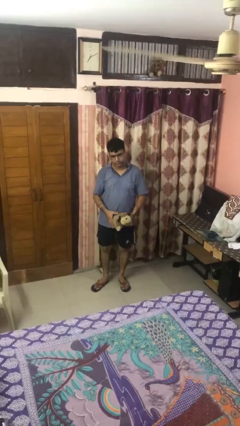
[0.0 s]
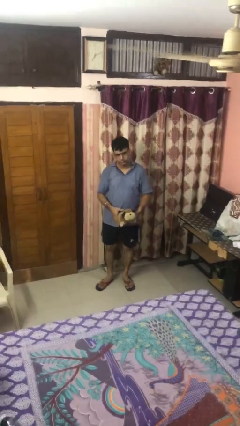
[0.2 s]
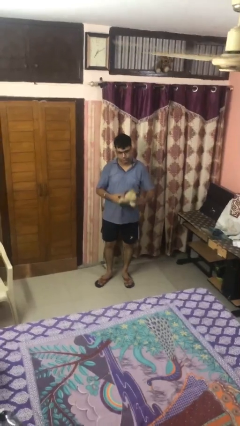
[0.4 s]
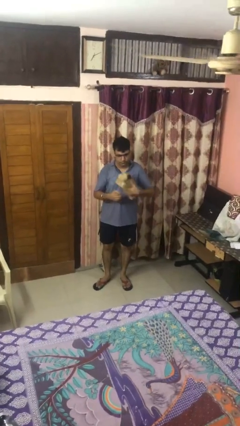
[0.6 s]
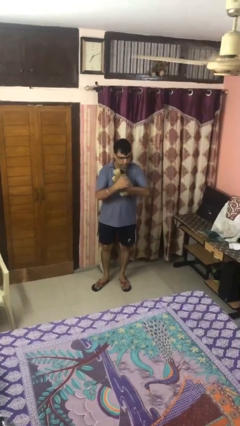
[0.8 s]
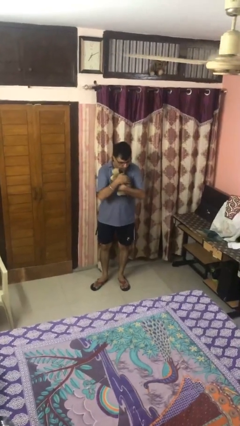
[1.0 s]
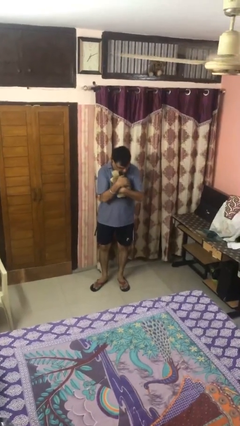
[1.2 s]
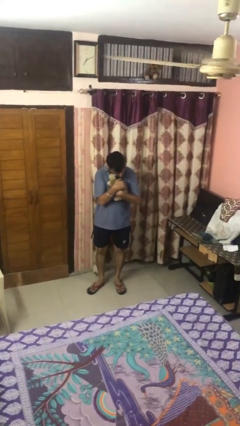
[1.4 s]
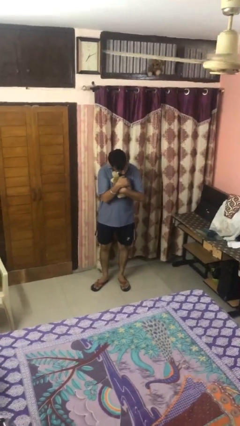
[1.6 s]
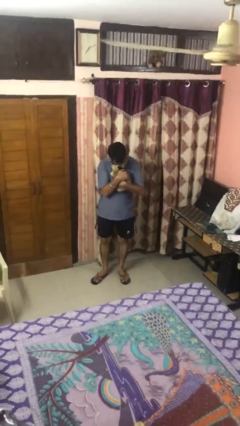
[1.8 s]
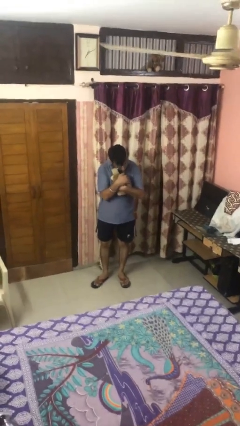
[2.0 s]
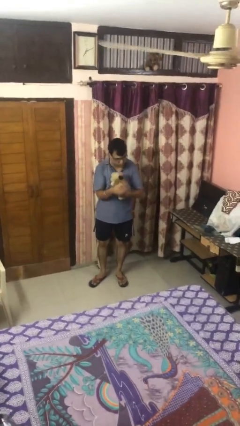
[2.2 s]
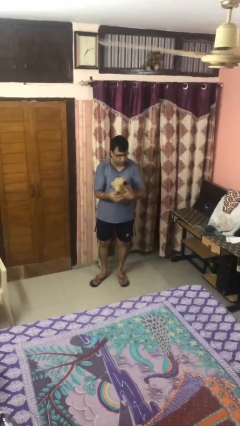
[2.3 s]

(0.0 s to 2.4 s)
person hugs stuffed animal

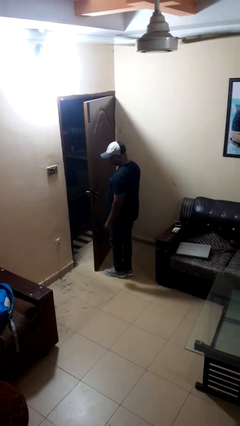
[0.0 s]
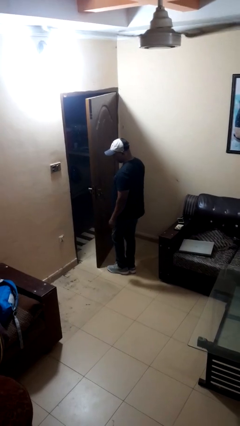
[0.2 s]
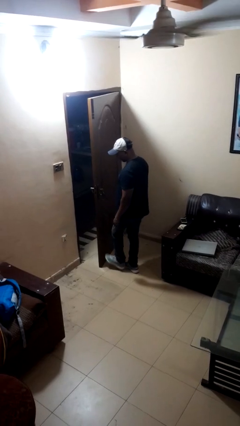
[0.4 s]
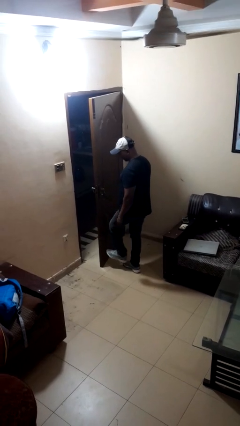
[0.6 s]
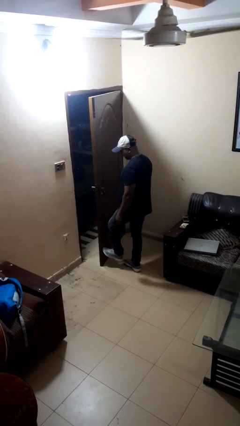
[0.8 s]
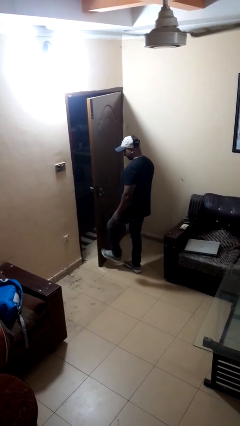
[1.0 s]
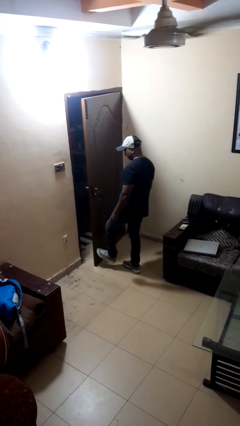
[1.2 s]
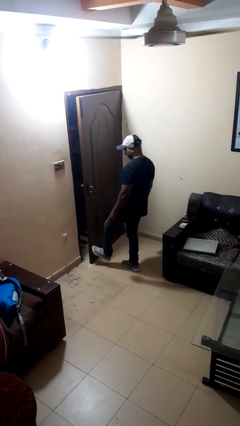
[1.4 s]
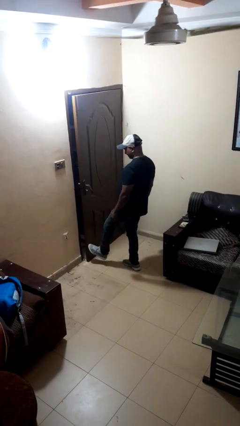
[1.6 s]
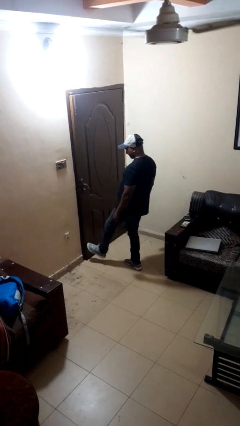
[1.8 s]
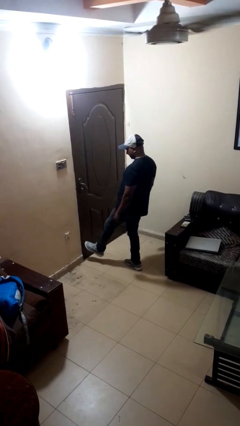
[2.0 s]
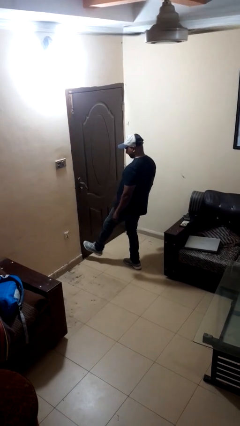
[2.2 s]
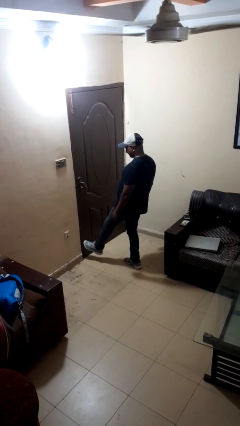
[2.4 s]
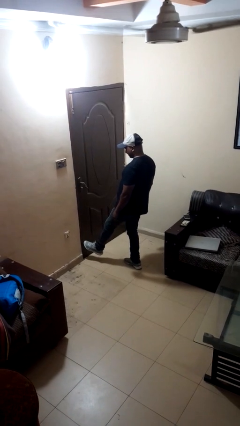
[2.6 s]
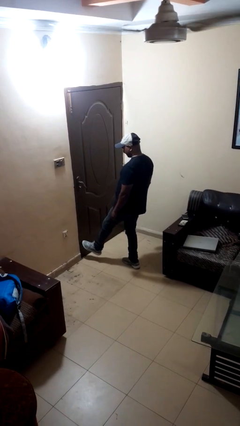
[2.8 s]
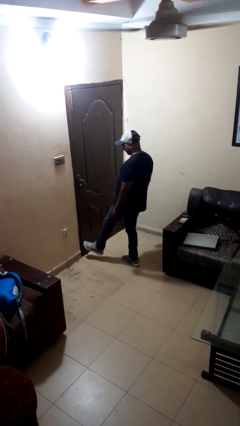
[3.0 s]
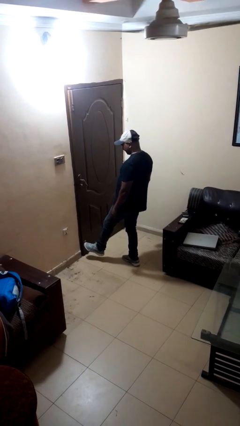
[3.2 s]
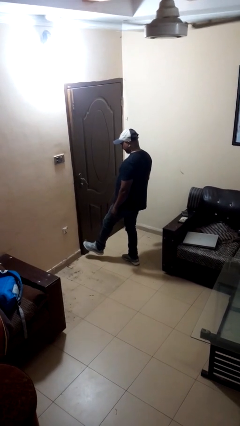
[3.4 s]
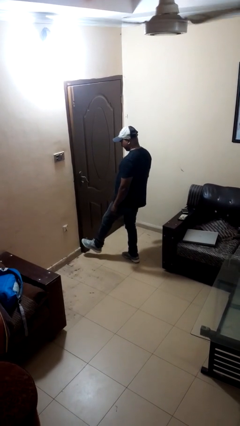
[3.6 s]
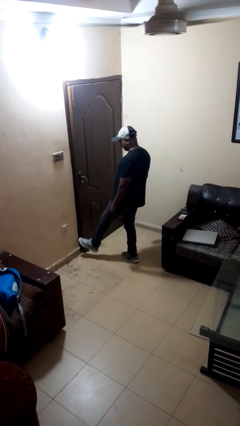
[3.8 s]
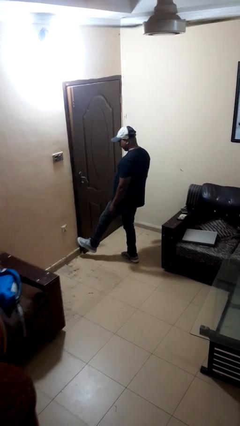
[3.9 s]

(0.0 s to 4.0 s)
person closes door with foot

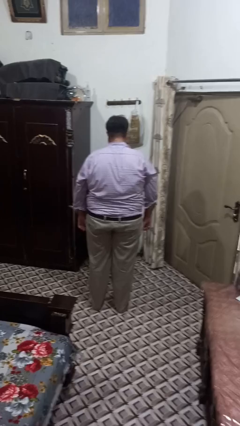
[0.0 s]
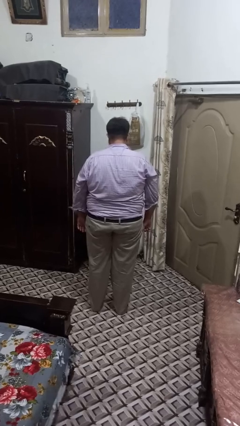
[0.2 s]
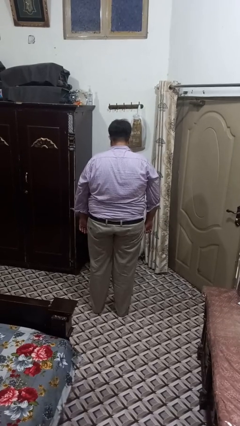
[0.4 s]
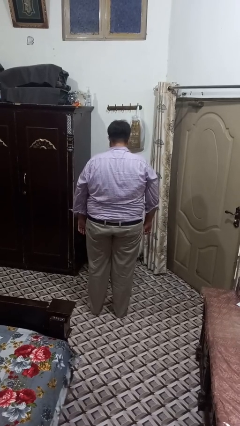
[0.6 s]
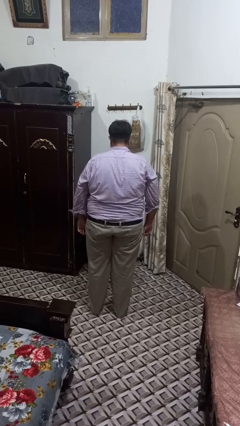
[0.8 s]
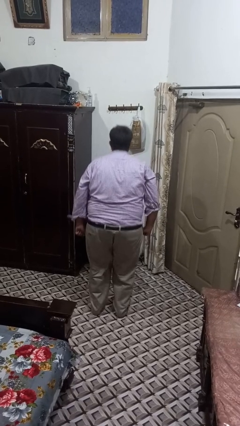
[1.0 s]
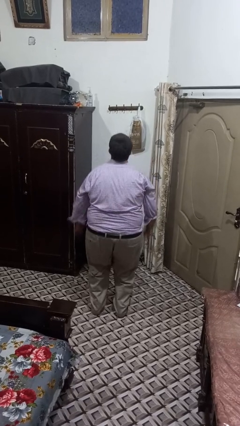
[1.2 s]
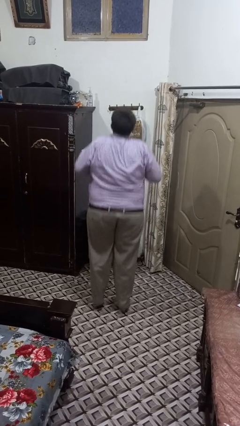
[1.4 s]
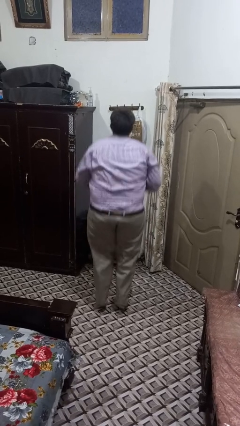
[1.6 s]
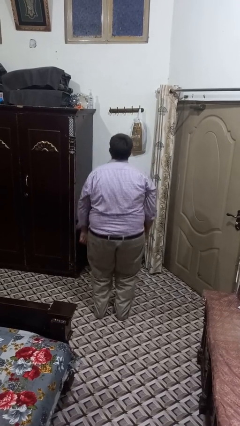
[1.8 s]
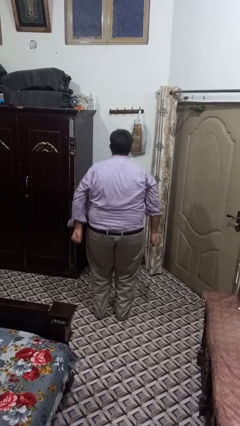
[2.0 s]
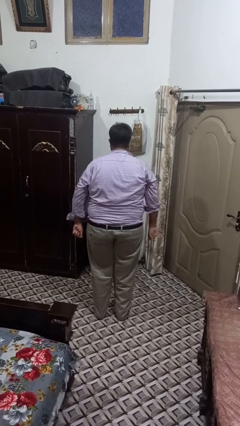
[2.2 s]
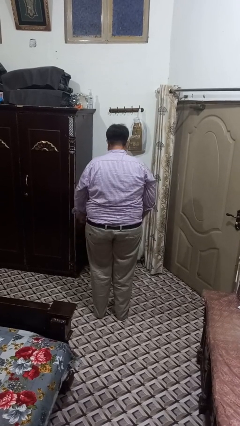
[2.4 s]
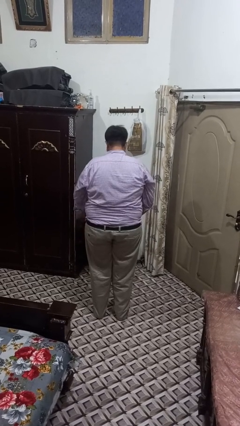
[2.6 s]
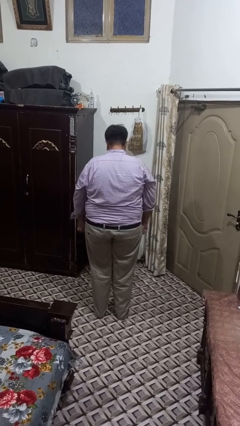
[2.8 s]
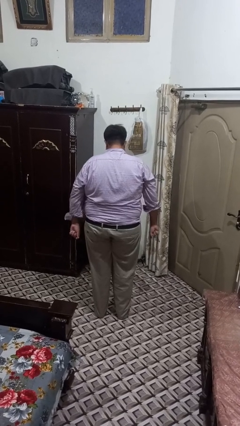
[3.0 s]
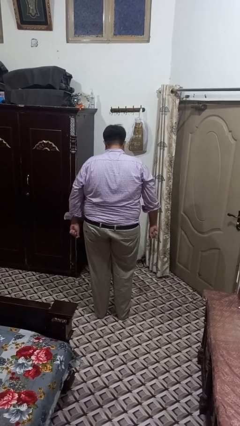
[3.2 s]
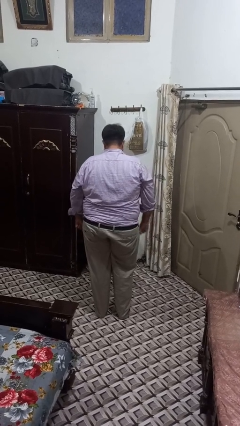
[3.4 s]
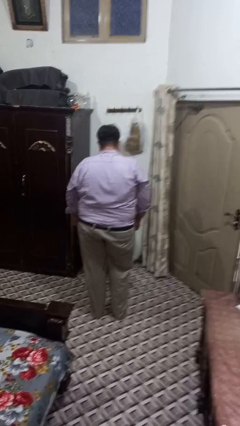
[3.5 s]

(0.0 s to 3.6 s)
person jumps

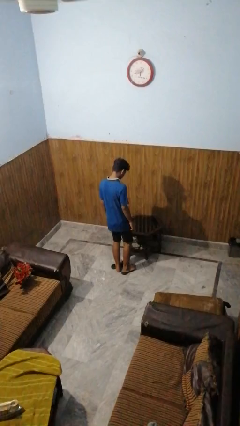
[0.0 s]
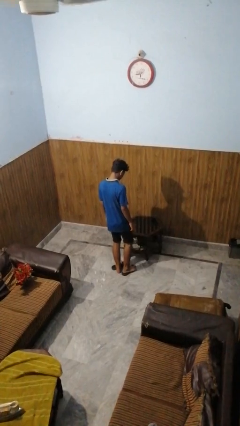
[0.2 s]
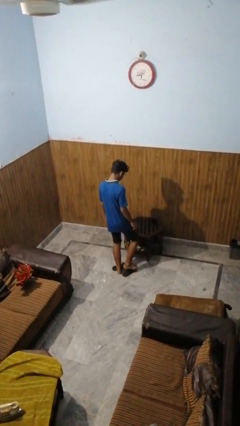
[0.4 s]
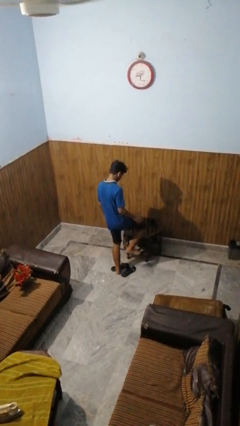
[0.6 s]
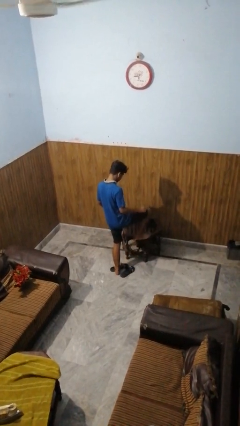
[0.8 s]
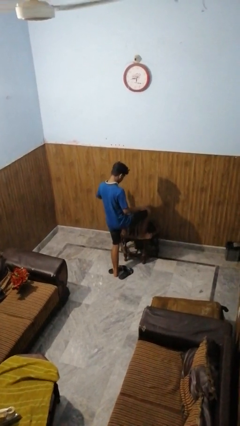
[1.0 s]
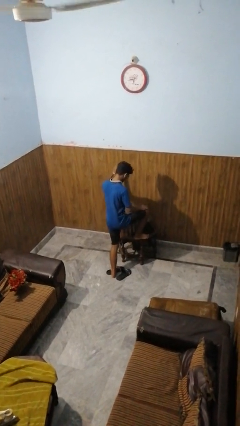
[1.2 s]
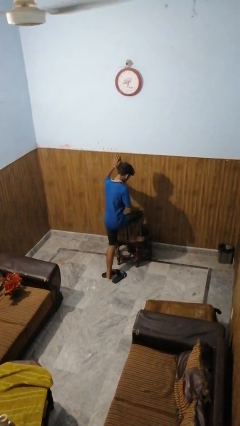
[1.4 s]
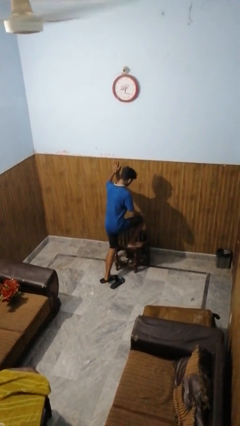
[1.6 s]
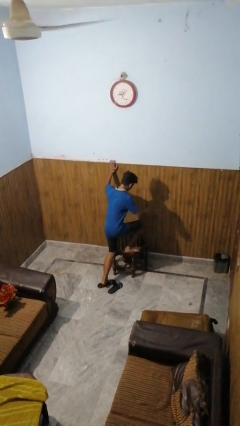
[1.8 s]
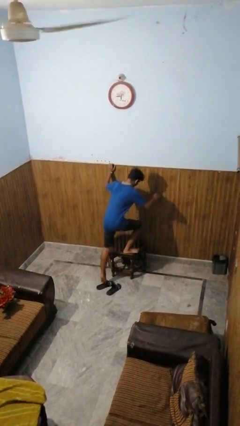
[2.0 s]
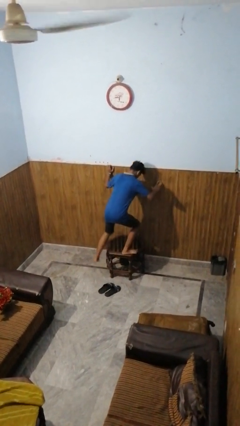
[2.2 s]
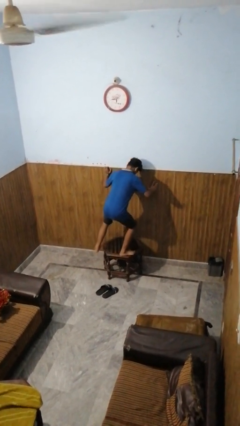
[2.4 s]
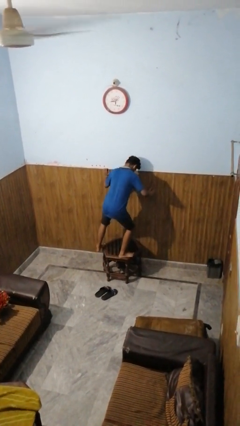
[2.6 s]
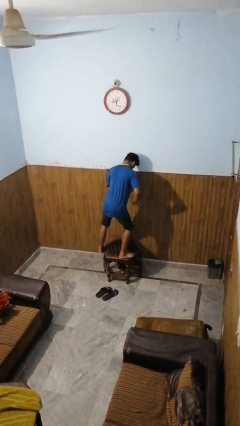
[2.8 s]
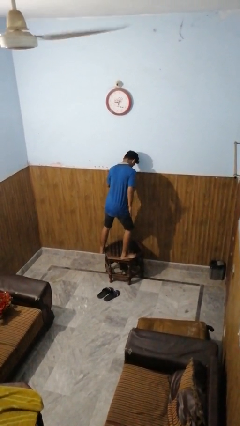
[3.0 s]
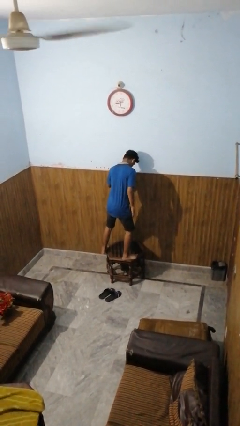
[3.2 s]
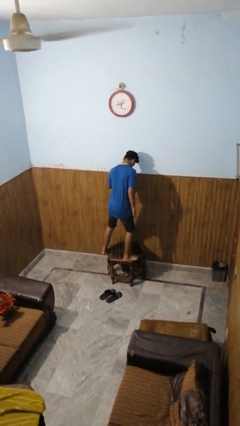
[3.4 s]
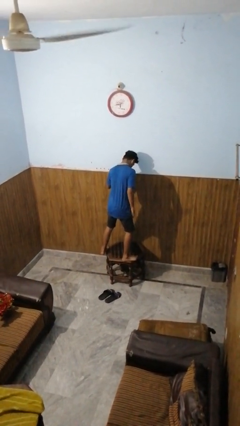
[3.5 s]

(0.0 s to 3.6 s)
person climbs on table

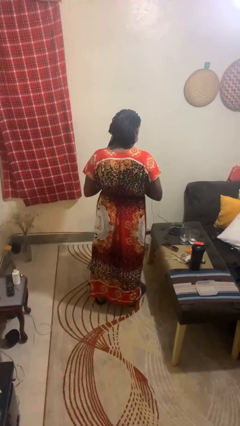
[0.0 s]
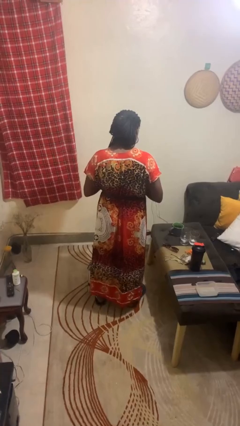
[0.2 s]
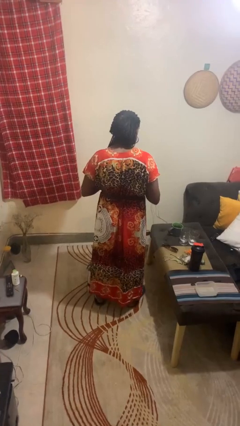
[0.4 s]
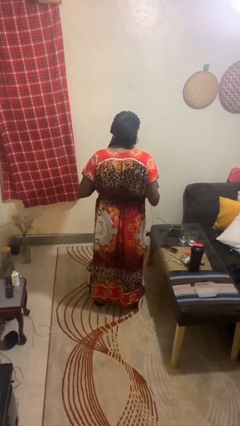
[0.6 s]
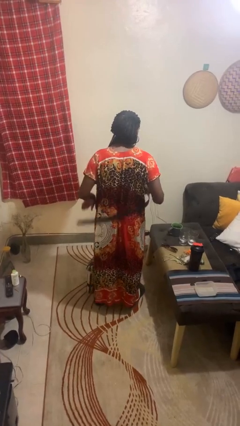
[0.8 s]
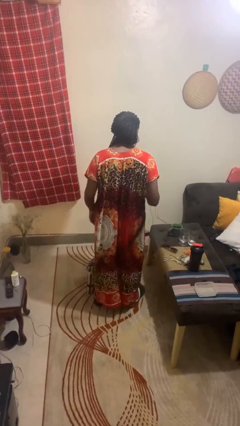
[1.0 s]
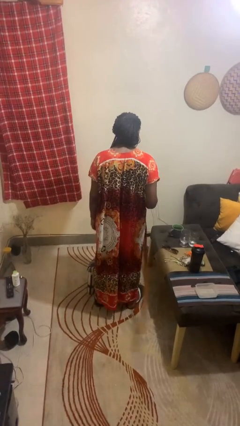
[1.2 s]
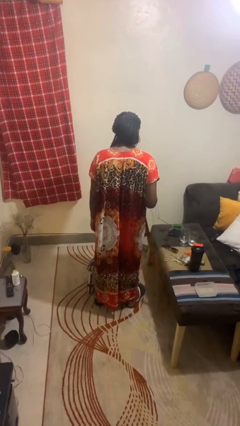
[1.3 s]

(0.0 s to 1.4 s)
person takes off belt

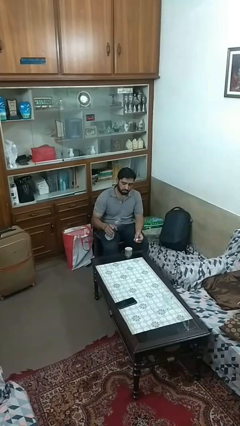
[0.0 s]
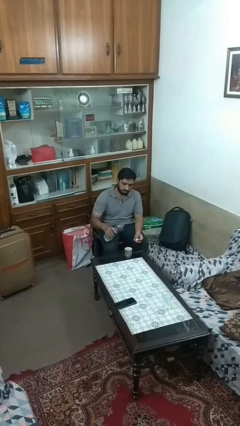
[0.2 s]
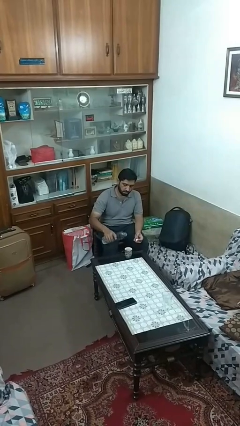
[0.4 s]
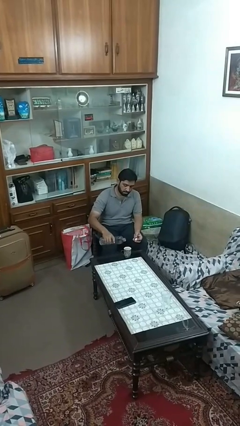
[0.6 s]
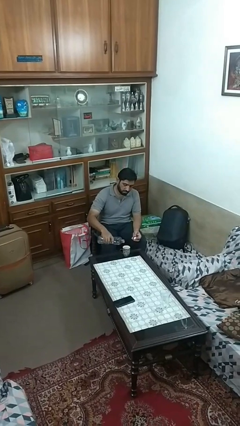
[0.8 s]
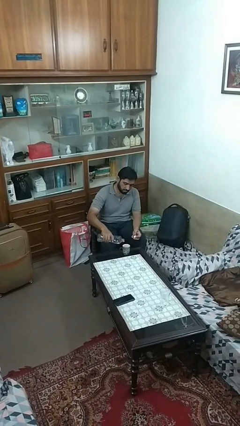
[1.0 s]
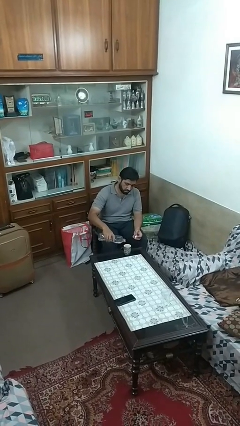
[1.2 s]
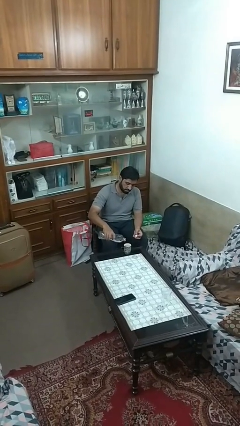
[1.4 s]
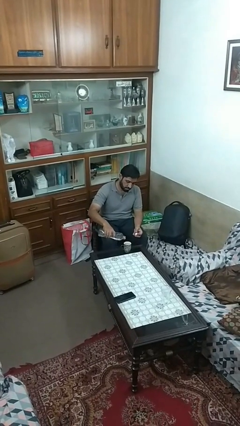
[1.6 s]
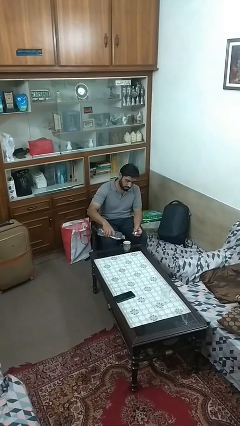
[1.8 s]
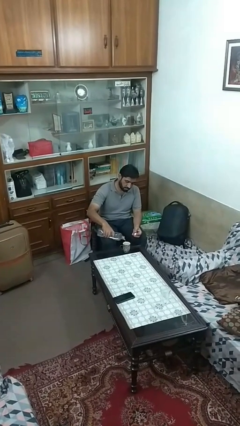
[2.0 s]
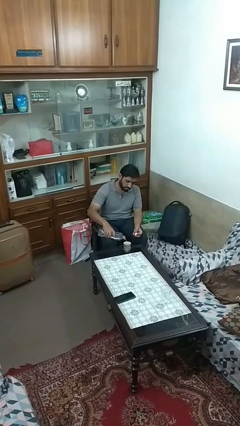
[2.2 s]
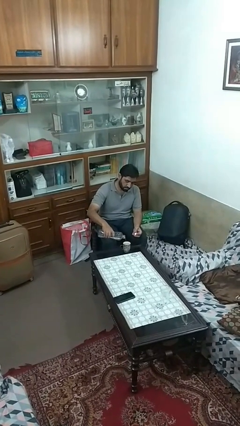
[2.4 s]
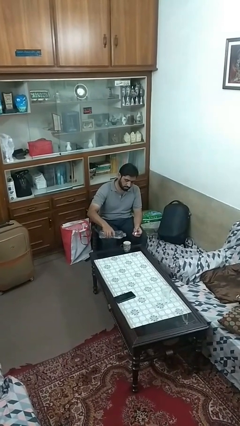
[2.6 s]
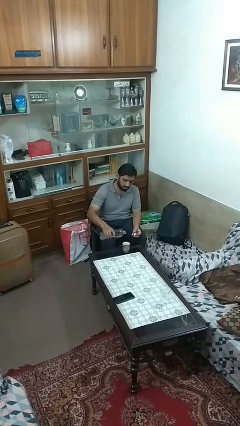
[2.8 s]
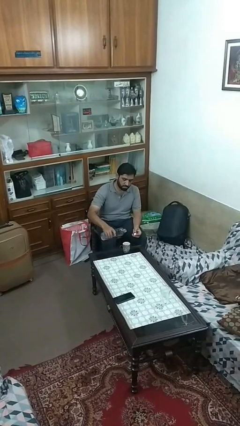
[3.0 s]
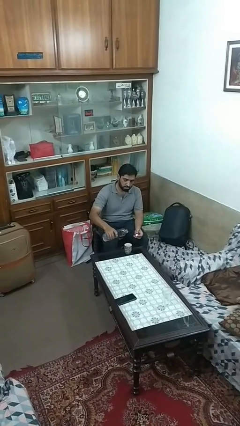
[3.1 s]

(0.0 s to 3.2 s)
person pours liquid into cup
